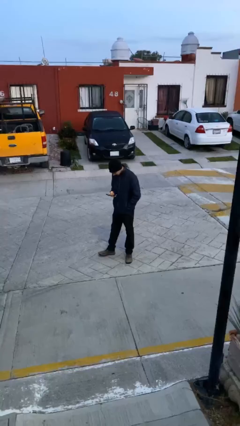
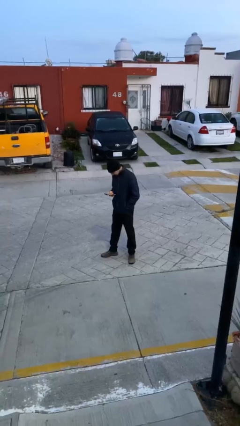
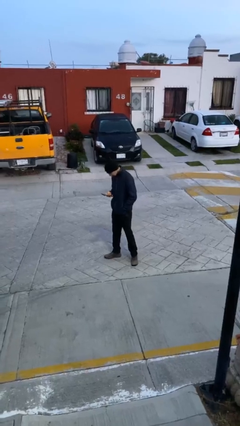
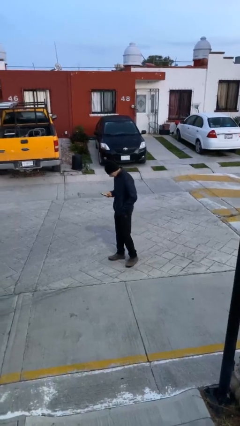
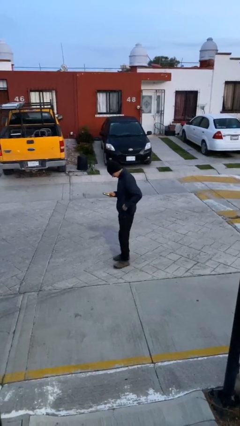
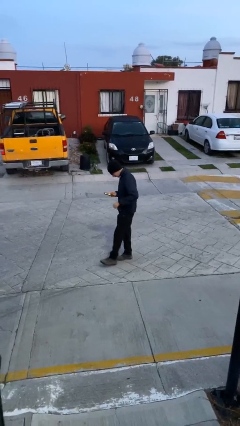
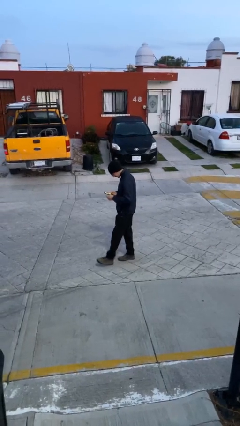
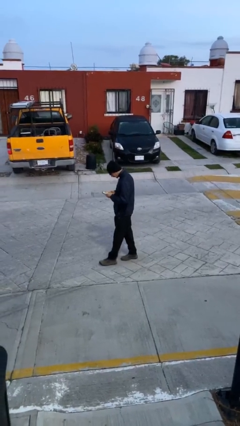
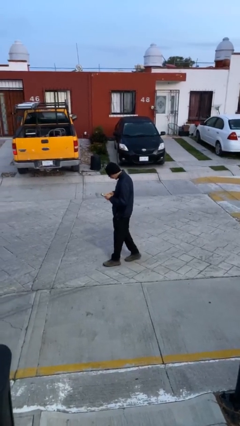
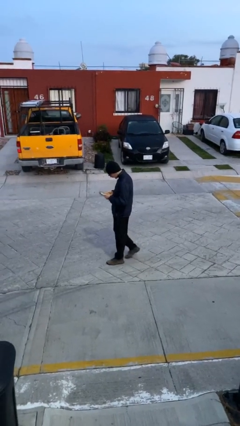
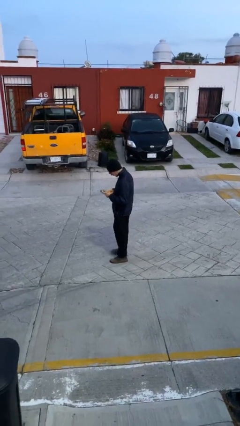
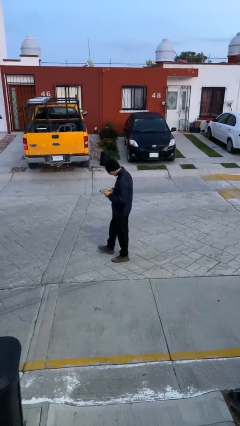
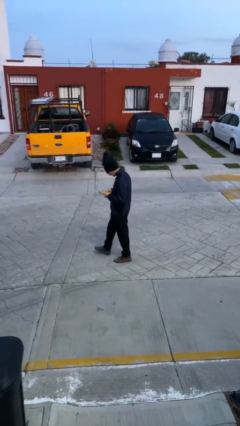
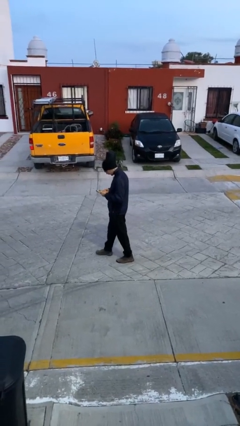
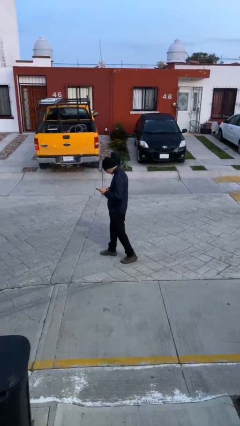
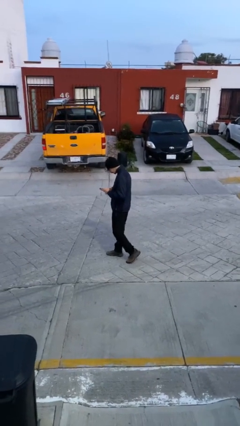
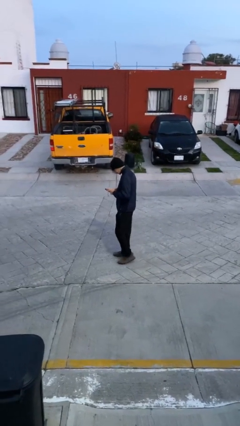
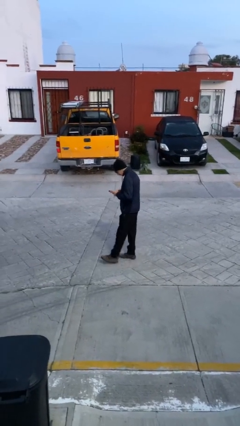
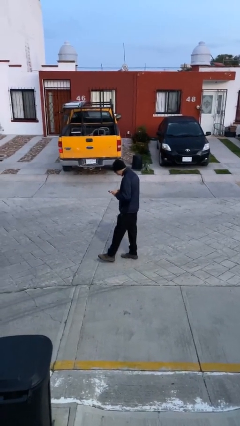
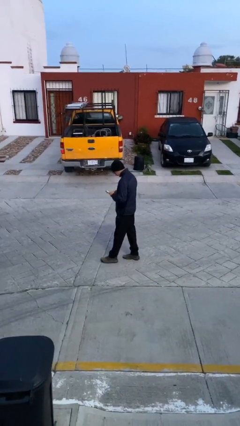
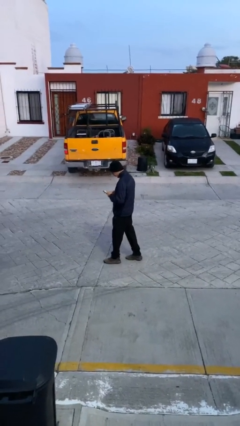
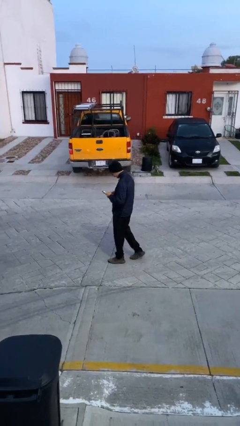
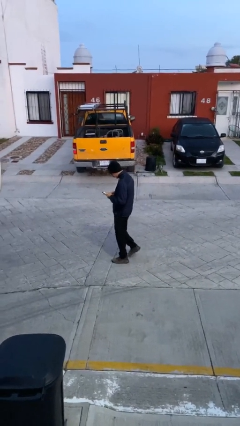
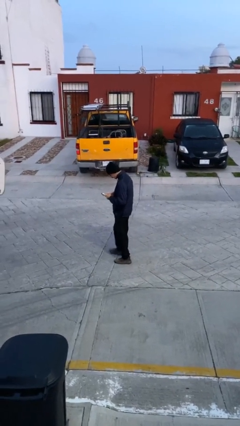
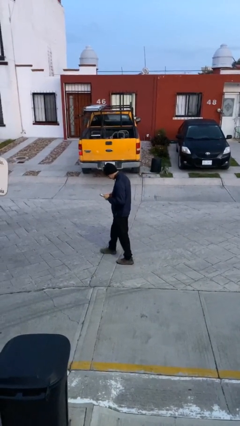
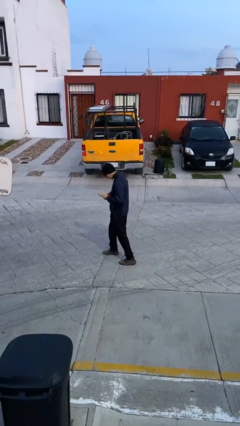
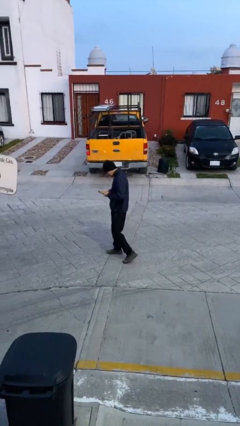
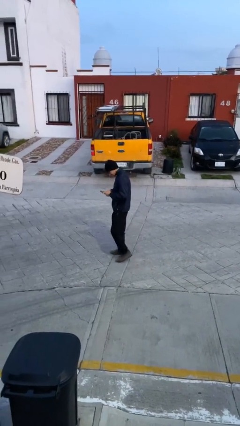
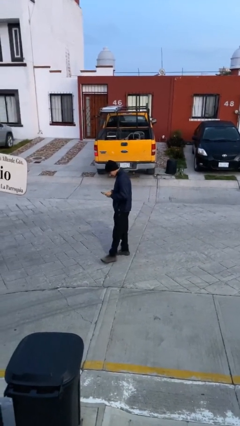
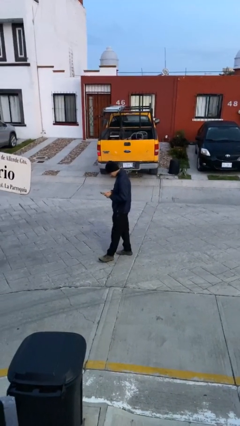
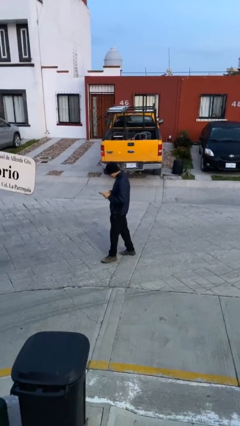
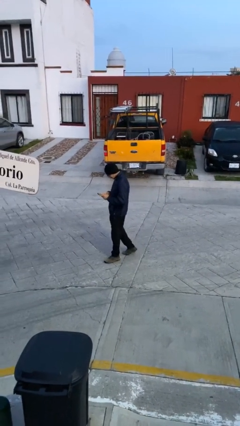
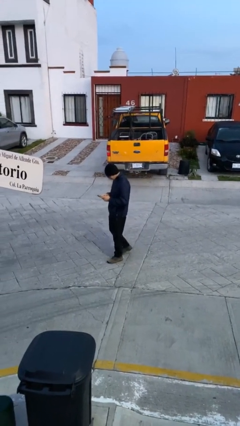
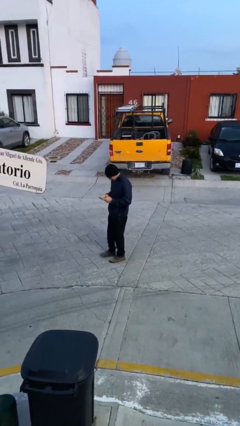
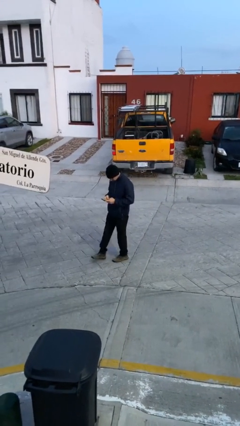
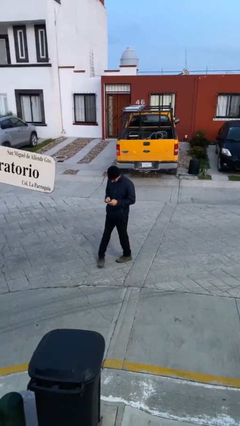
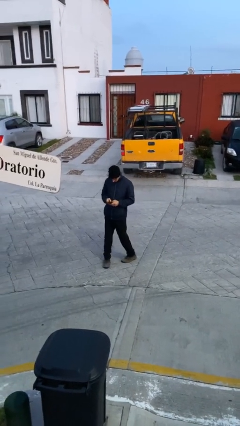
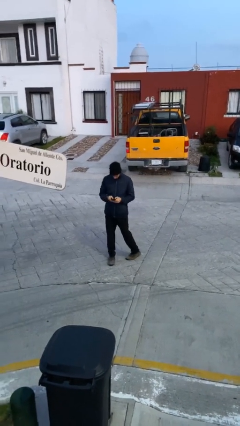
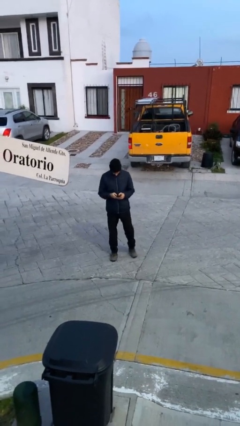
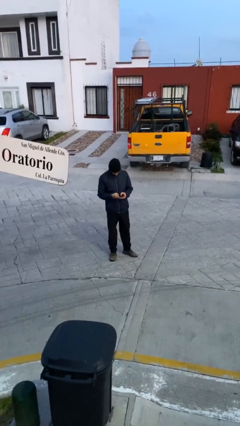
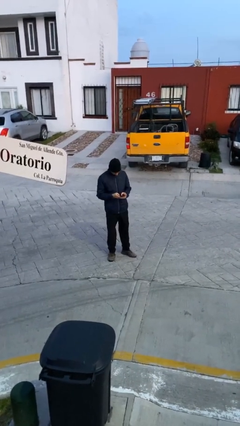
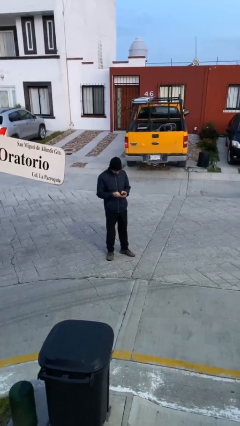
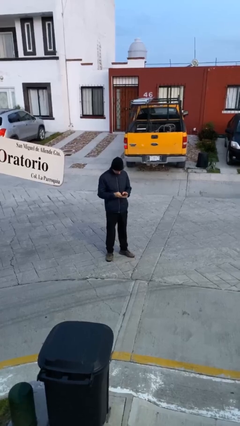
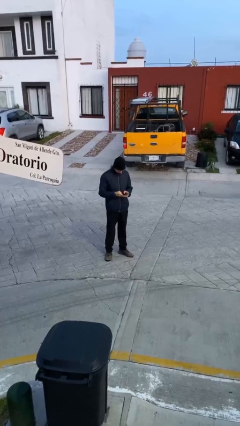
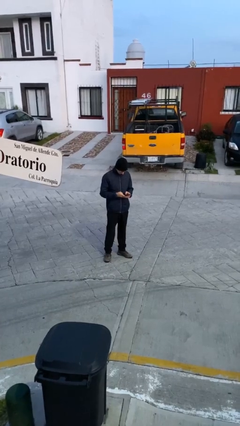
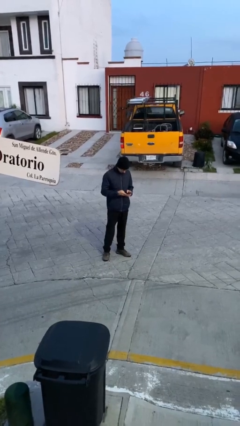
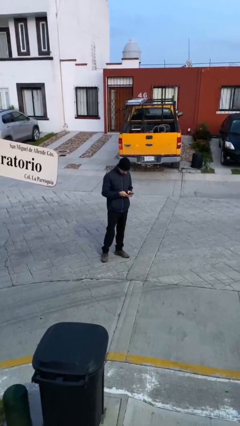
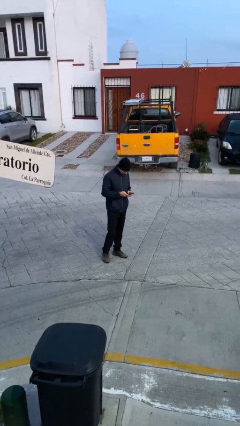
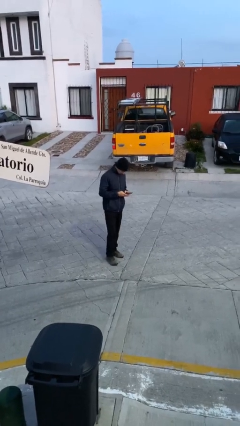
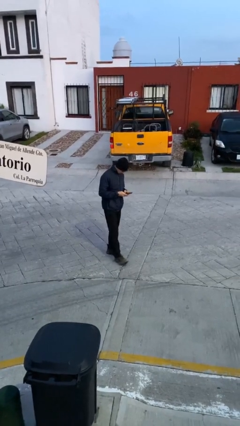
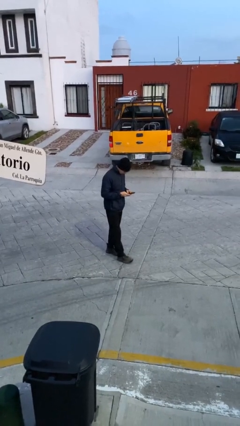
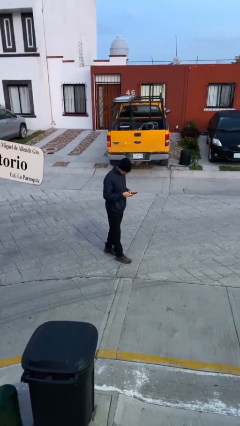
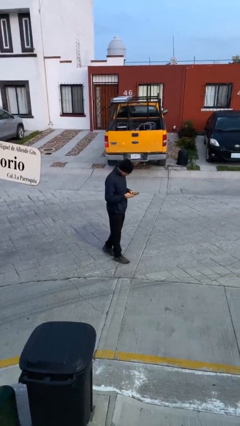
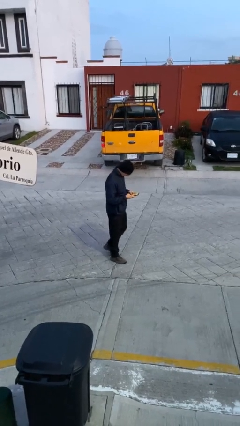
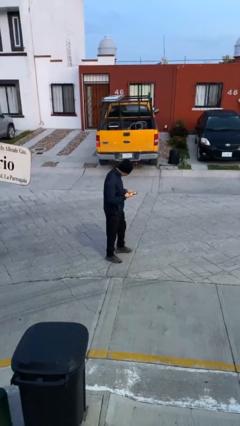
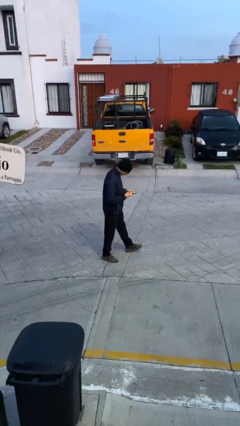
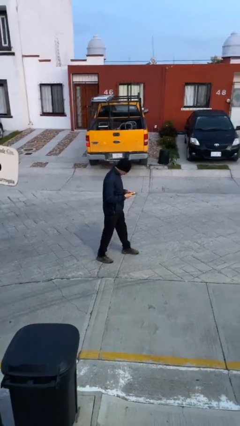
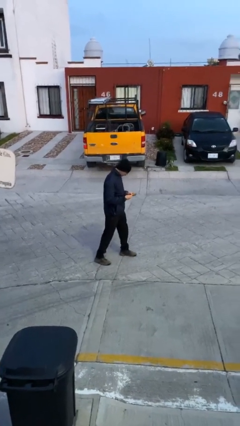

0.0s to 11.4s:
person texts on phone

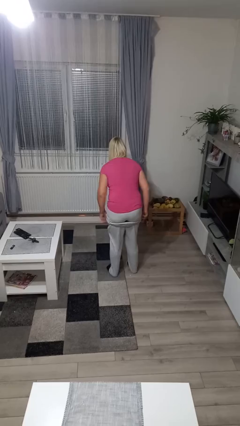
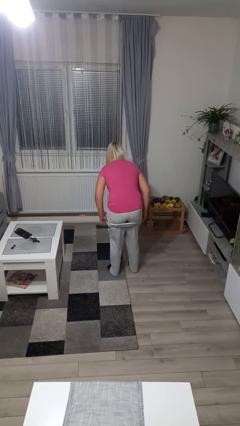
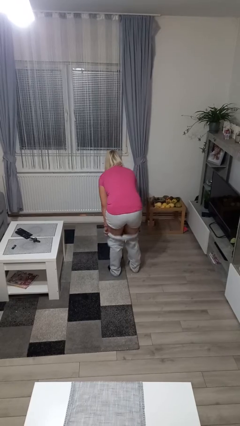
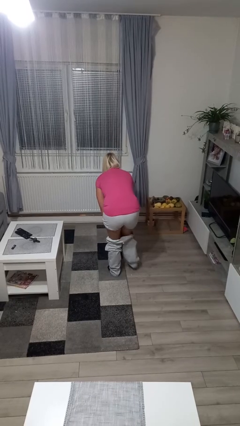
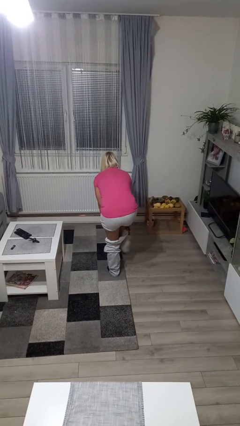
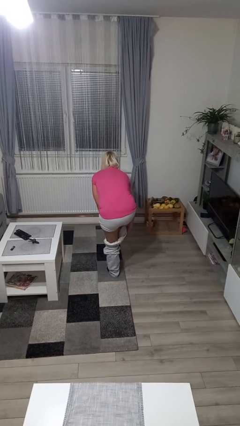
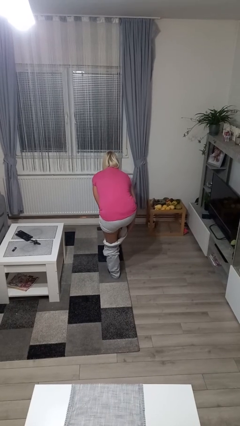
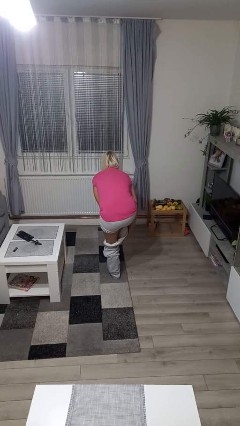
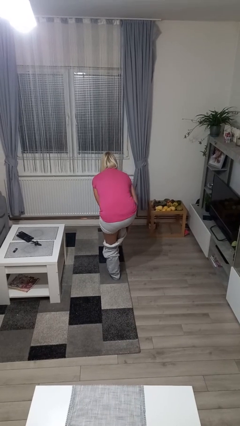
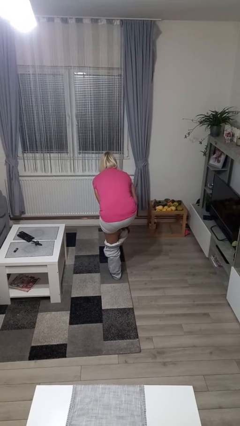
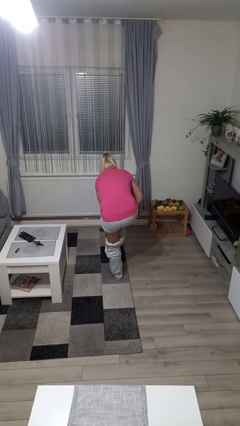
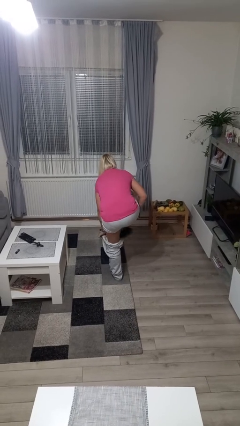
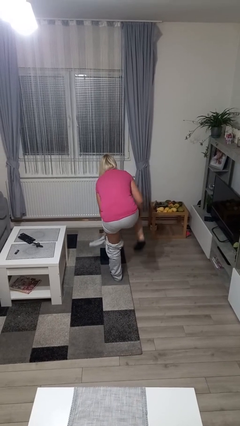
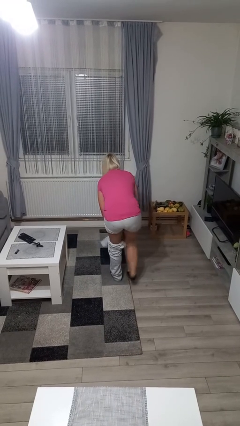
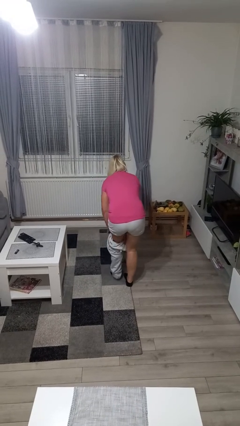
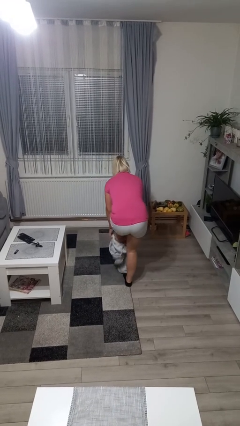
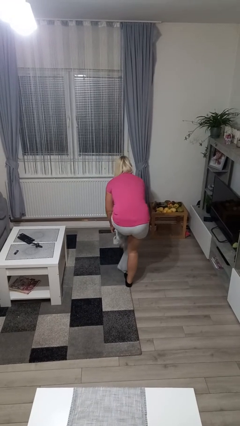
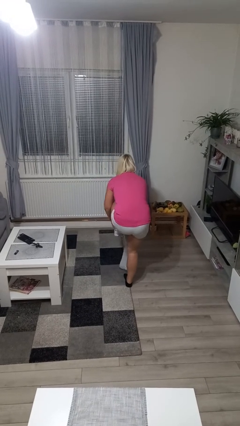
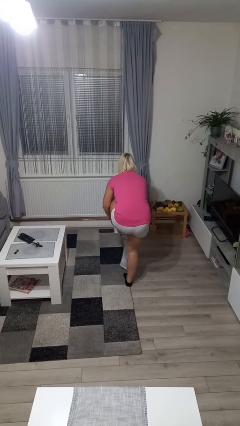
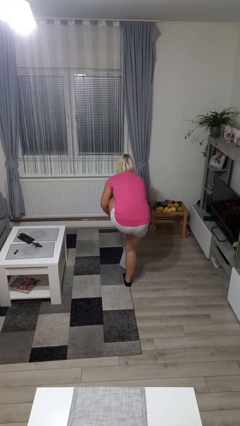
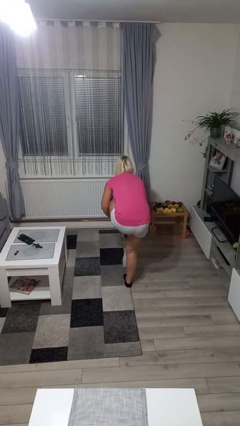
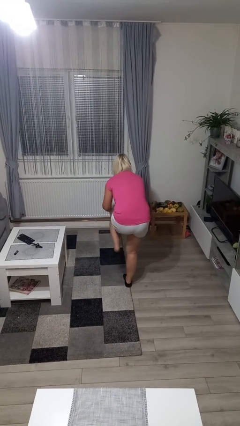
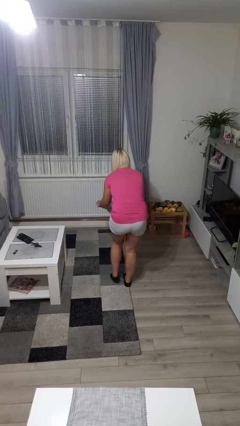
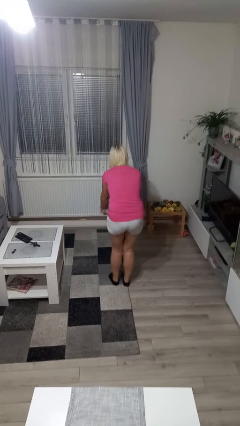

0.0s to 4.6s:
person takes off pants

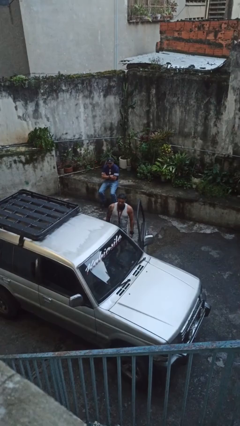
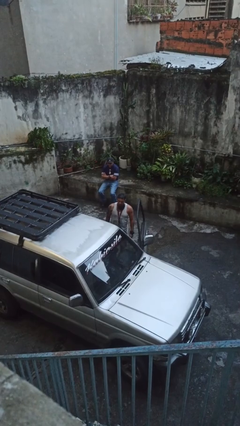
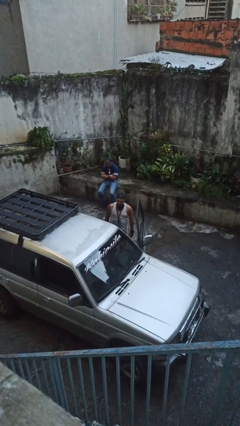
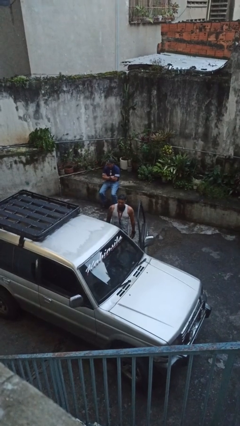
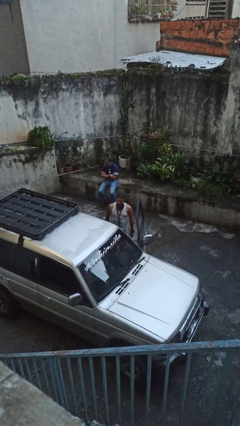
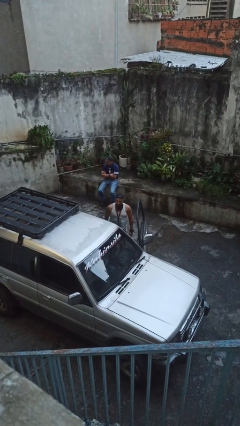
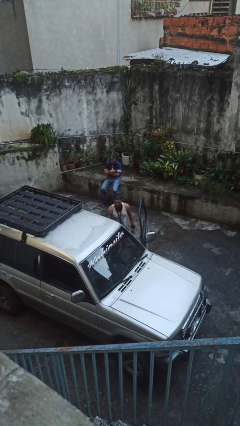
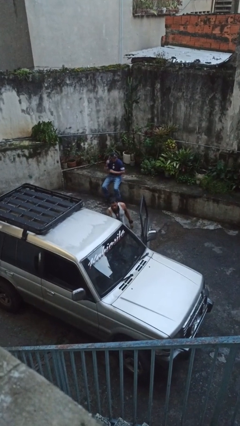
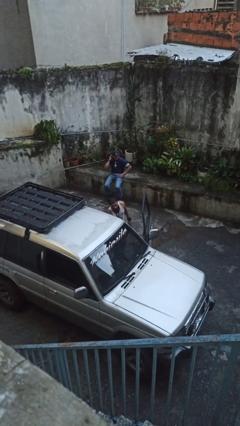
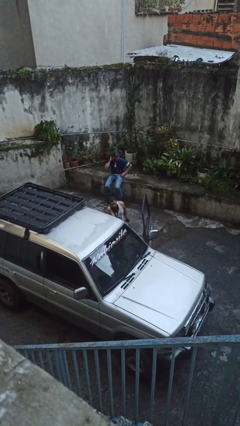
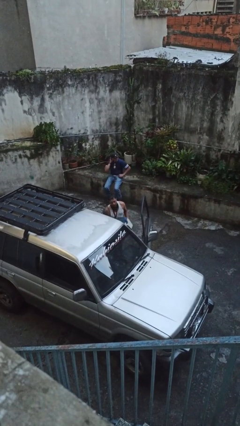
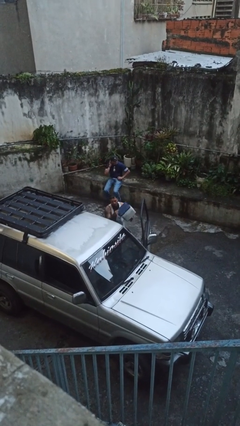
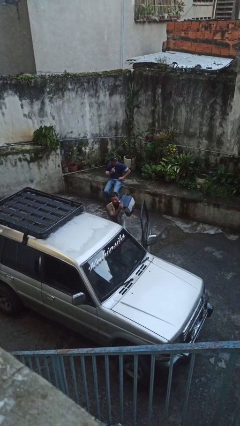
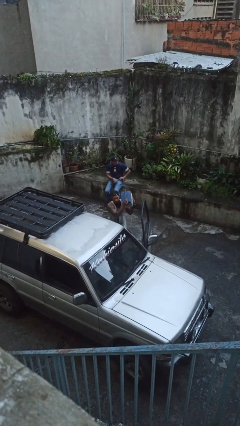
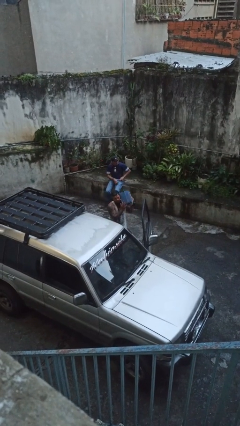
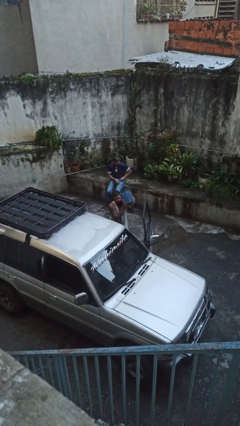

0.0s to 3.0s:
person unloads car
